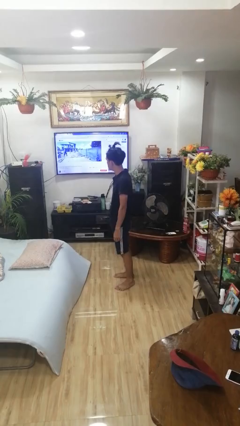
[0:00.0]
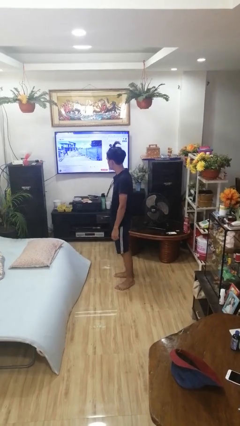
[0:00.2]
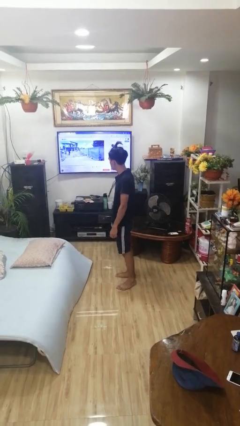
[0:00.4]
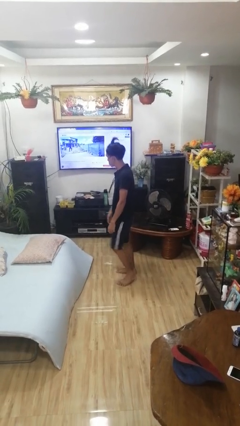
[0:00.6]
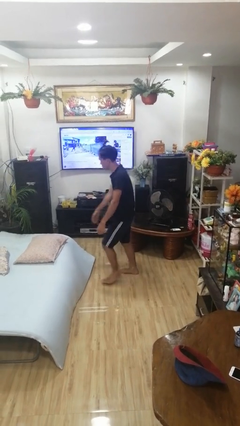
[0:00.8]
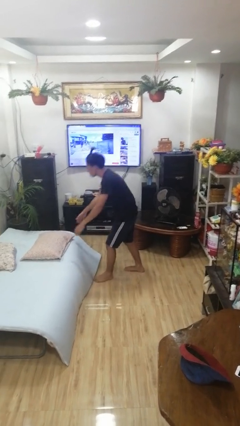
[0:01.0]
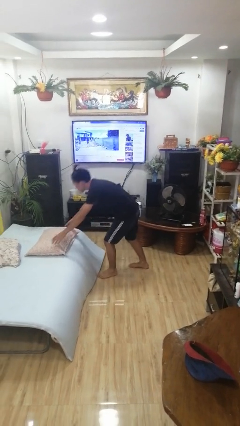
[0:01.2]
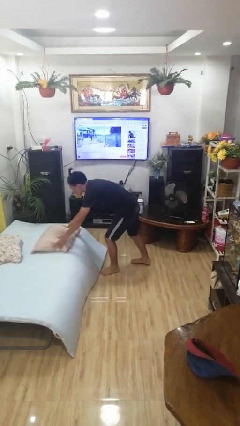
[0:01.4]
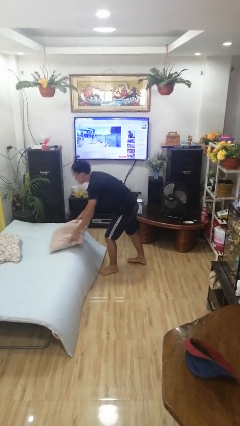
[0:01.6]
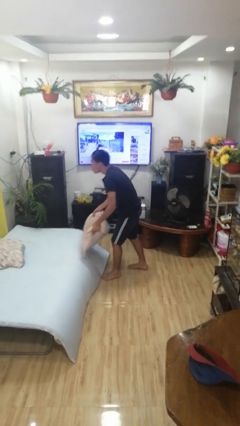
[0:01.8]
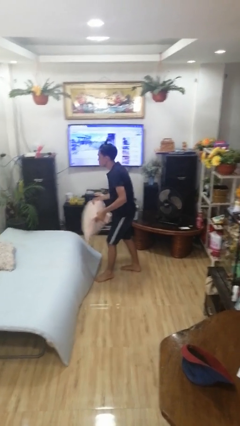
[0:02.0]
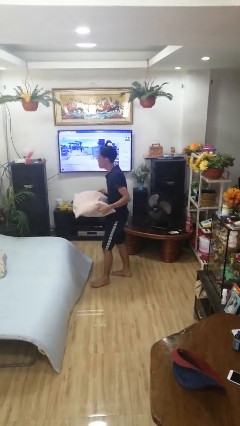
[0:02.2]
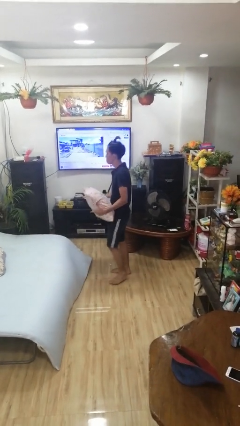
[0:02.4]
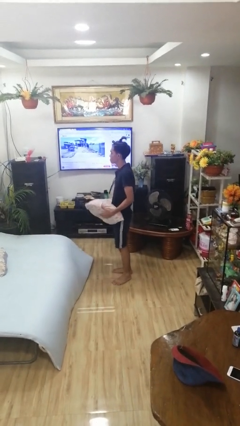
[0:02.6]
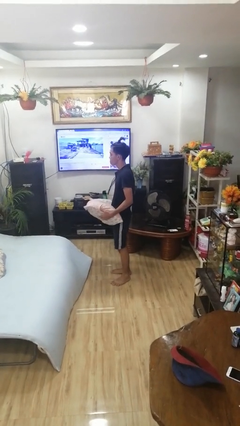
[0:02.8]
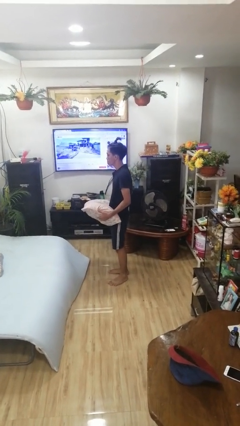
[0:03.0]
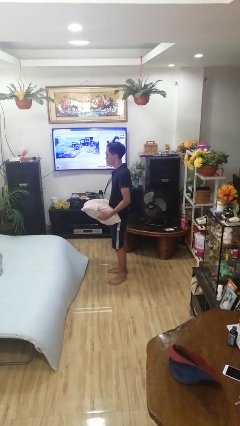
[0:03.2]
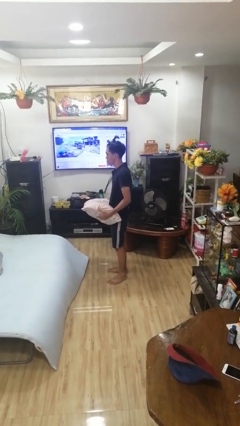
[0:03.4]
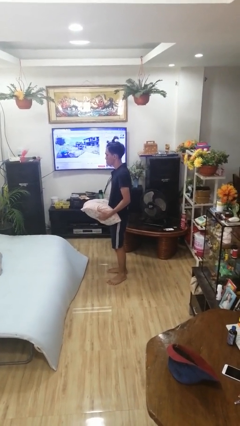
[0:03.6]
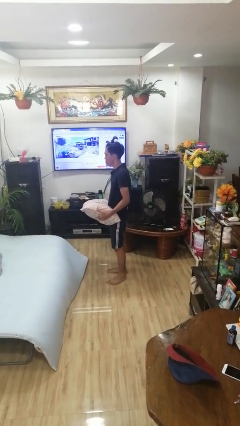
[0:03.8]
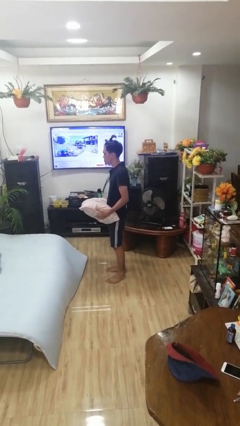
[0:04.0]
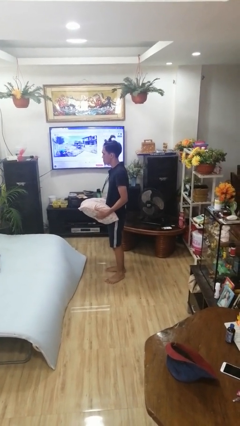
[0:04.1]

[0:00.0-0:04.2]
person picks up object from bed

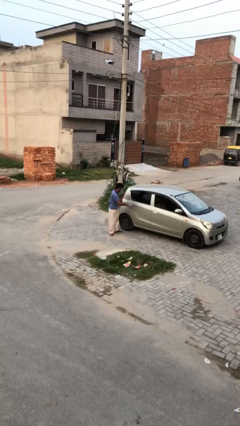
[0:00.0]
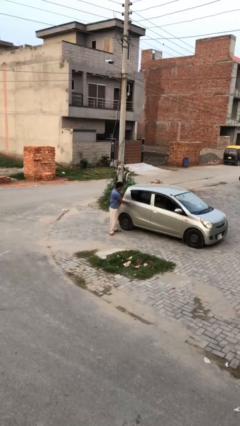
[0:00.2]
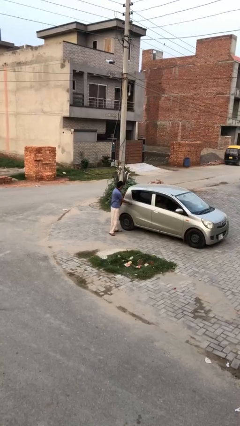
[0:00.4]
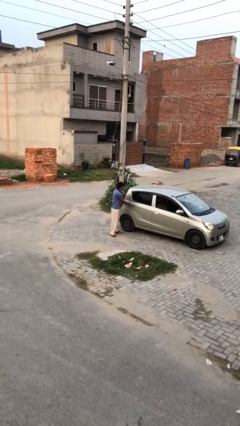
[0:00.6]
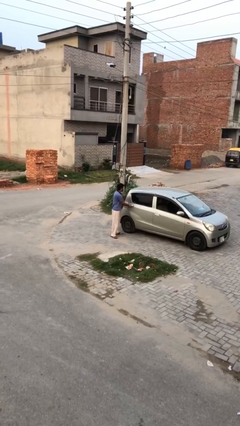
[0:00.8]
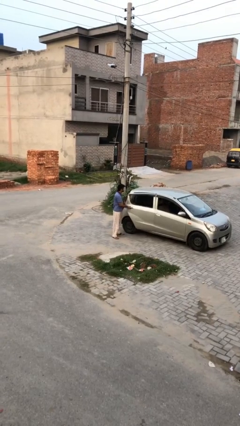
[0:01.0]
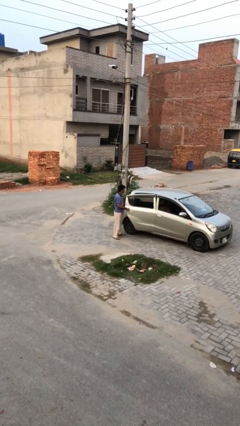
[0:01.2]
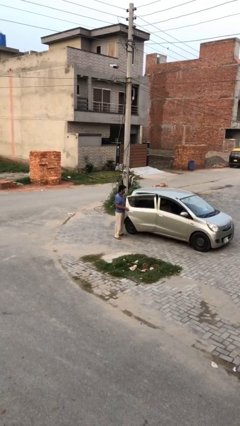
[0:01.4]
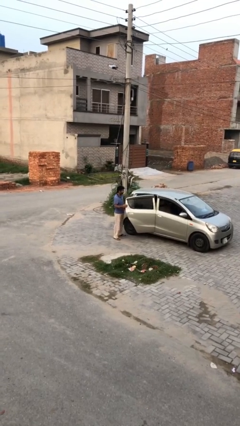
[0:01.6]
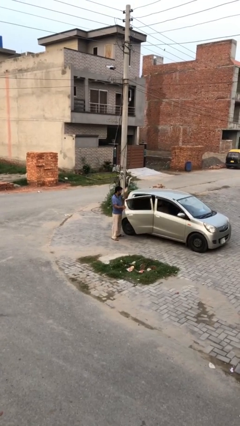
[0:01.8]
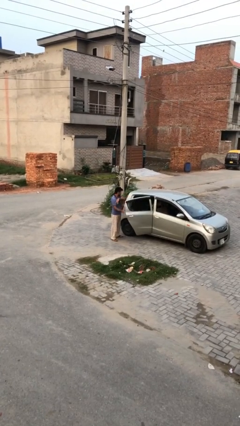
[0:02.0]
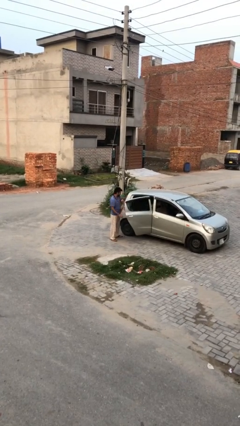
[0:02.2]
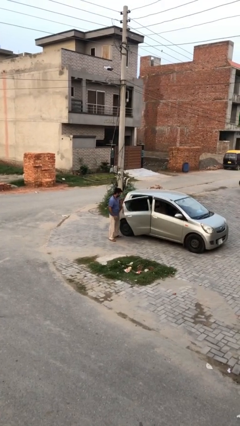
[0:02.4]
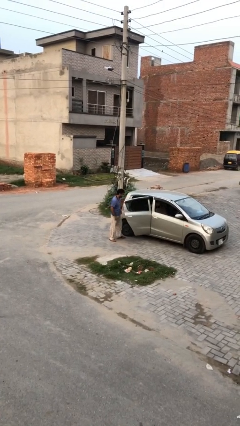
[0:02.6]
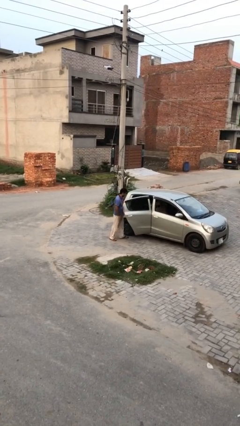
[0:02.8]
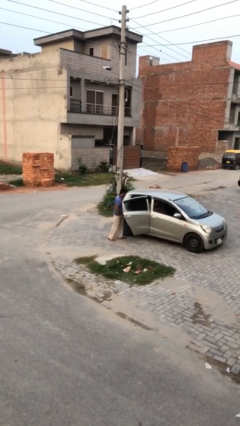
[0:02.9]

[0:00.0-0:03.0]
person opens car door

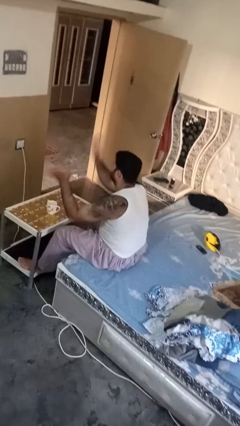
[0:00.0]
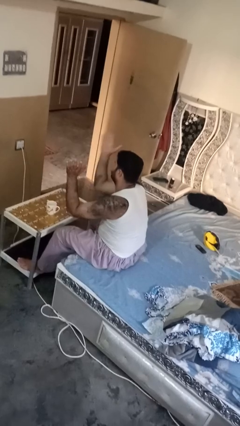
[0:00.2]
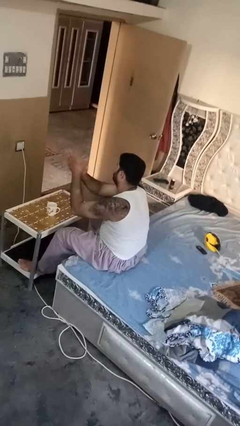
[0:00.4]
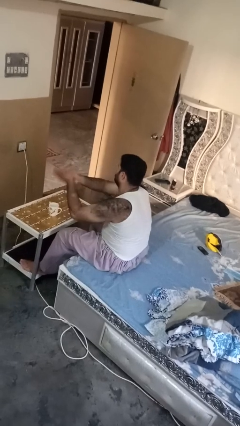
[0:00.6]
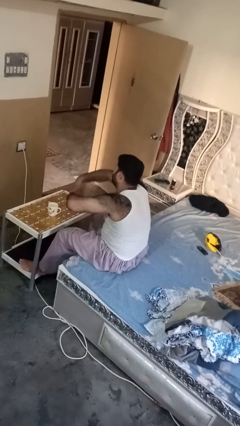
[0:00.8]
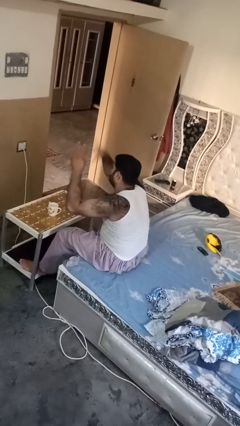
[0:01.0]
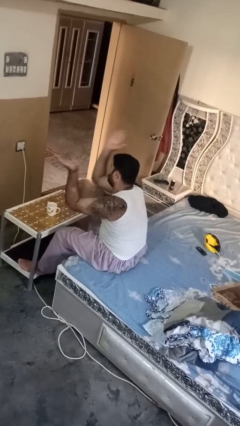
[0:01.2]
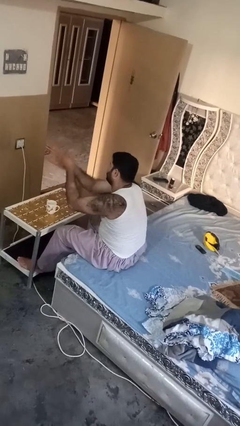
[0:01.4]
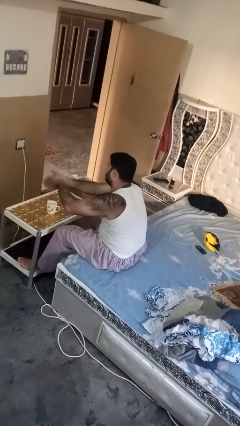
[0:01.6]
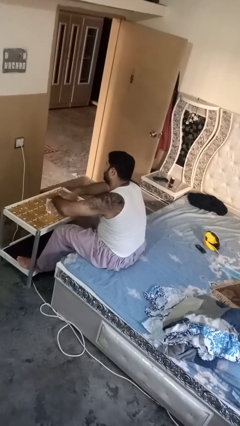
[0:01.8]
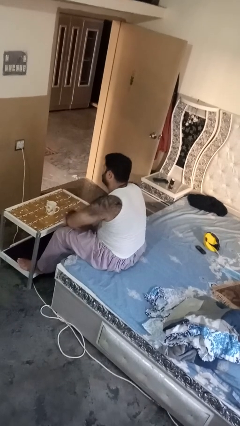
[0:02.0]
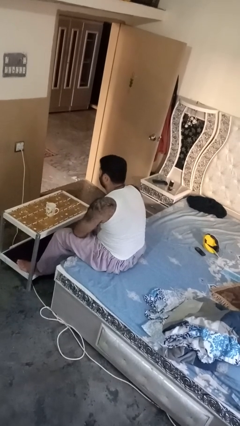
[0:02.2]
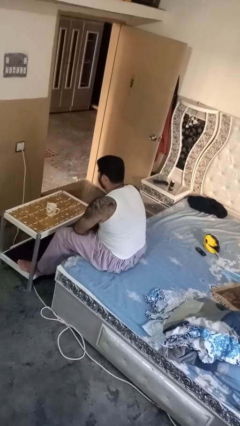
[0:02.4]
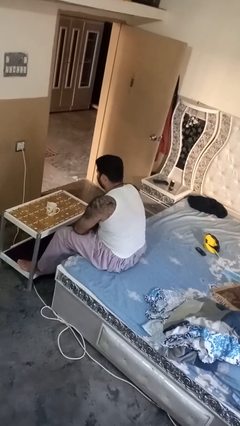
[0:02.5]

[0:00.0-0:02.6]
person claps hands

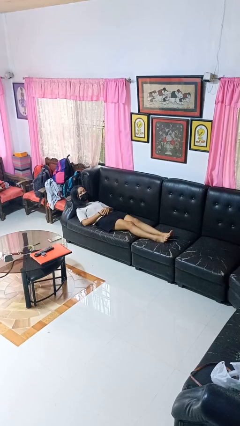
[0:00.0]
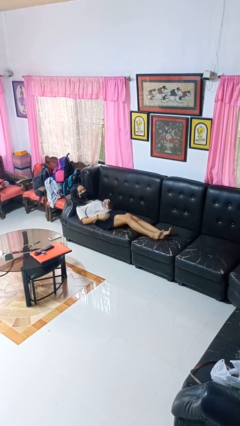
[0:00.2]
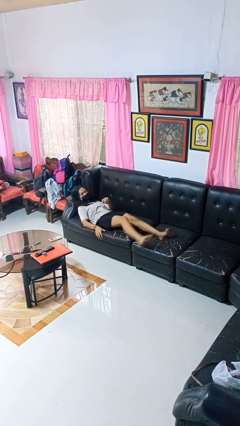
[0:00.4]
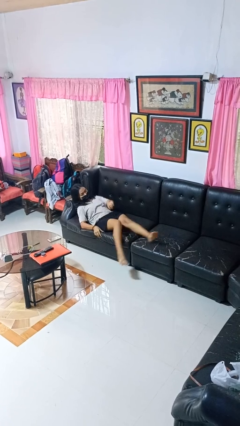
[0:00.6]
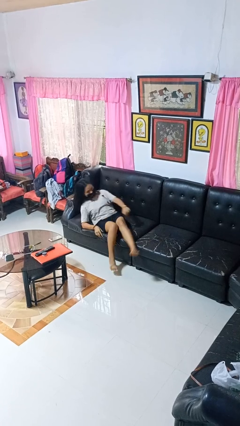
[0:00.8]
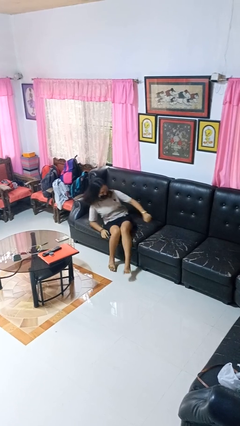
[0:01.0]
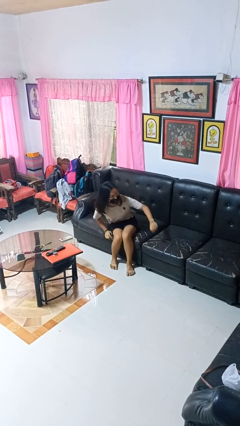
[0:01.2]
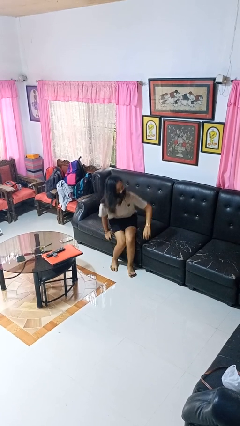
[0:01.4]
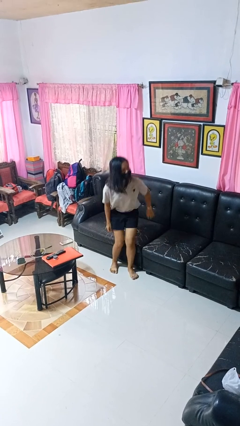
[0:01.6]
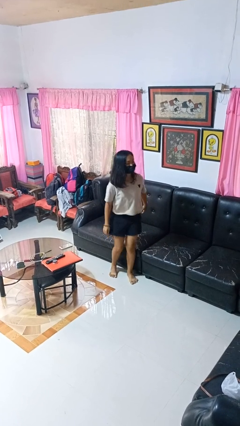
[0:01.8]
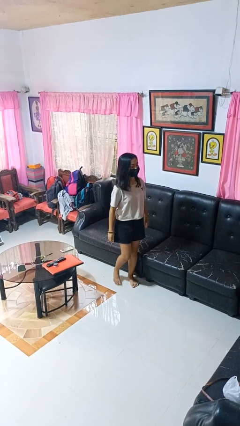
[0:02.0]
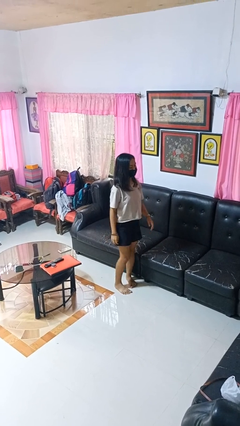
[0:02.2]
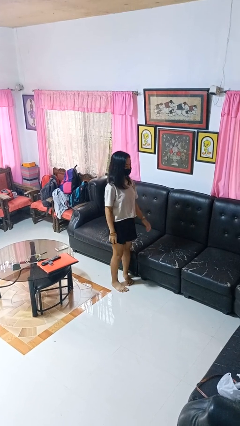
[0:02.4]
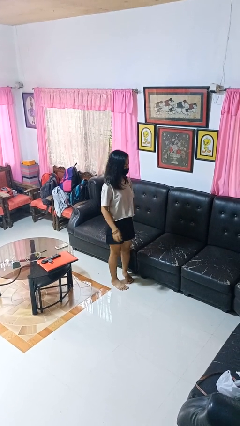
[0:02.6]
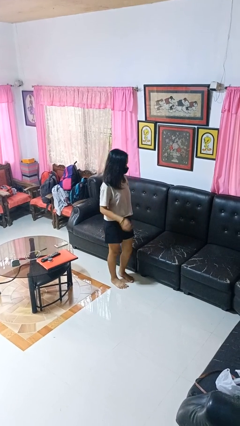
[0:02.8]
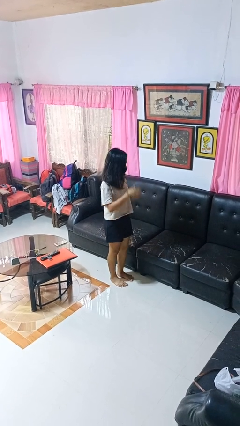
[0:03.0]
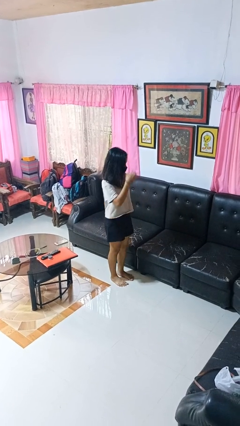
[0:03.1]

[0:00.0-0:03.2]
person stands up

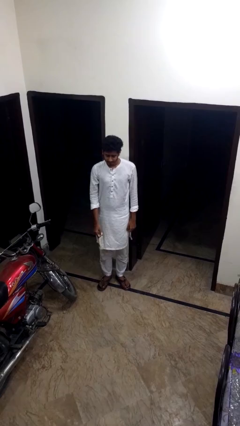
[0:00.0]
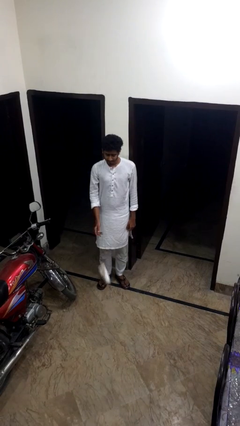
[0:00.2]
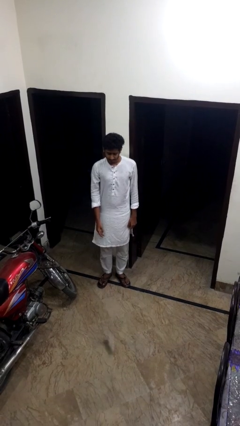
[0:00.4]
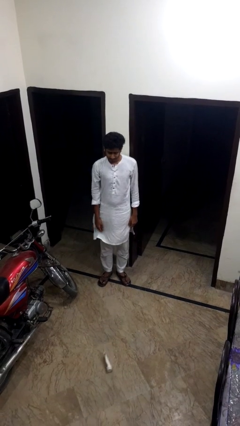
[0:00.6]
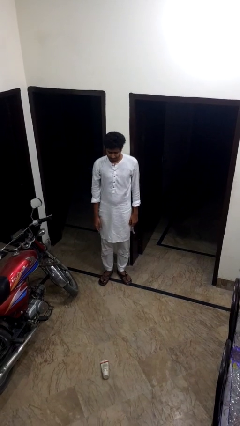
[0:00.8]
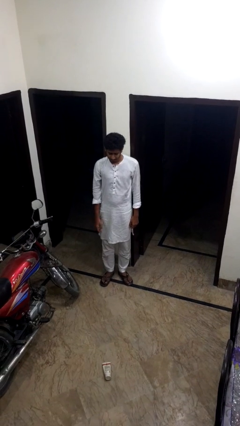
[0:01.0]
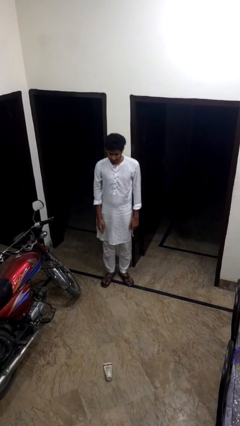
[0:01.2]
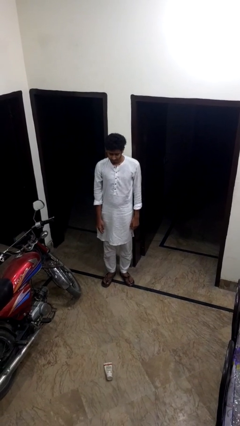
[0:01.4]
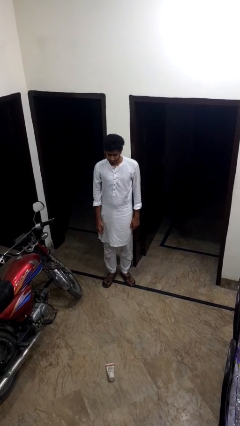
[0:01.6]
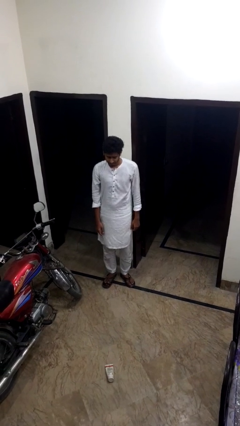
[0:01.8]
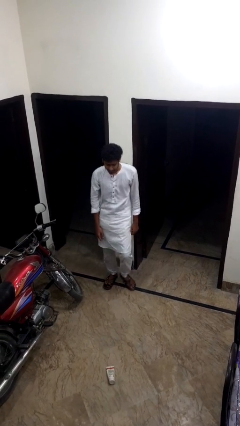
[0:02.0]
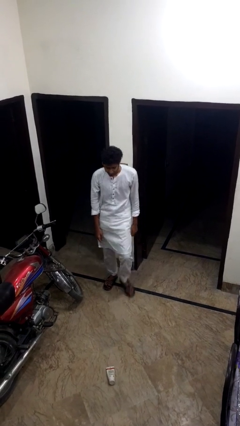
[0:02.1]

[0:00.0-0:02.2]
person throws object to ground

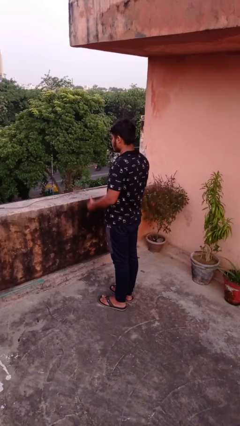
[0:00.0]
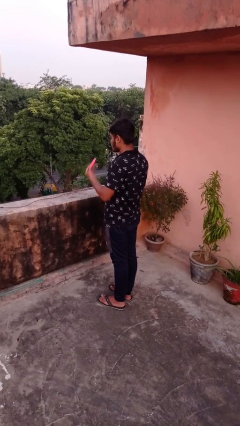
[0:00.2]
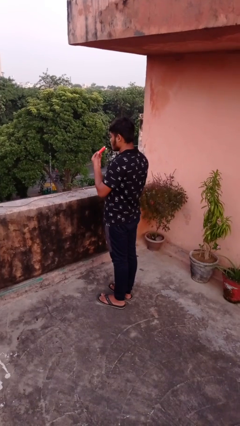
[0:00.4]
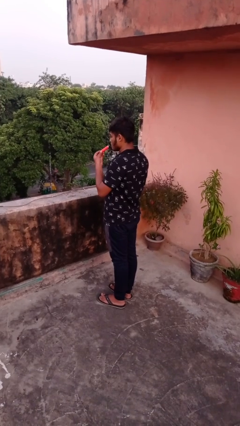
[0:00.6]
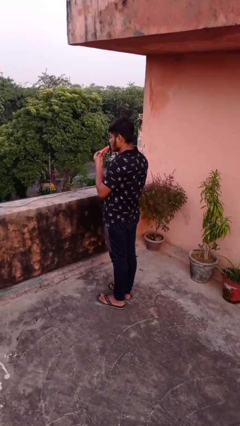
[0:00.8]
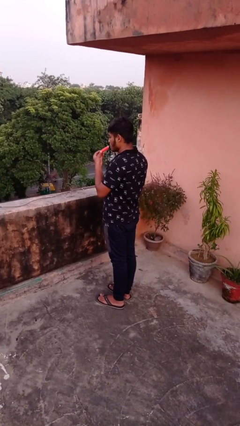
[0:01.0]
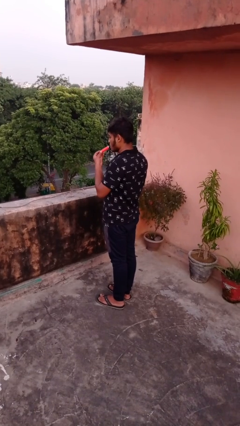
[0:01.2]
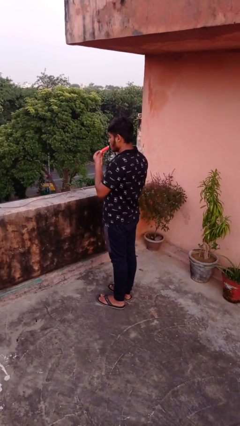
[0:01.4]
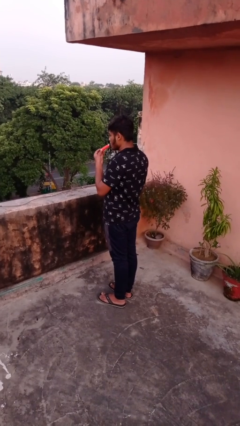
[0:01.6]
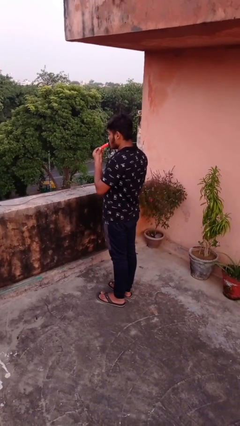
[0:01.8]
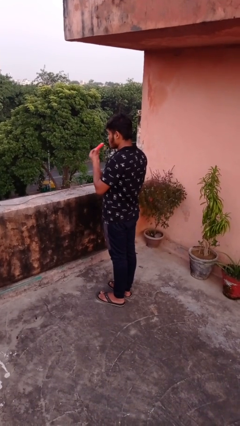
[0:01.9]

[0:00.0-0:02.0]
person vapes
